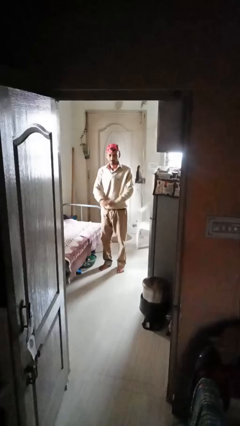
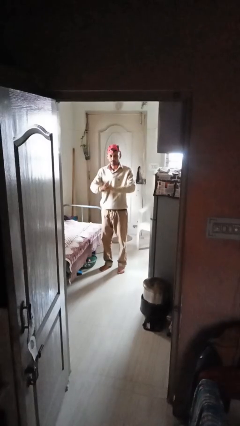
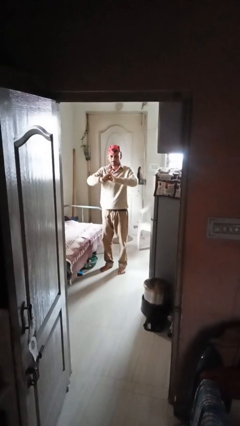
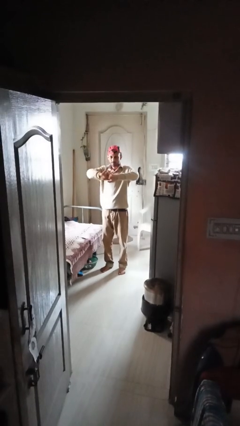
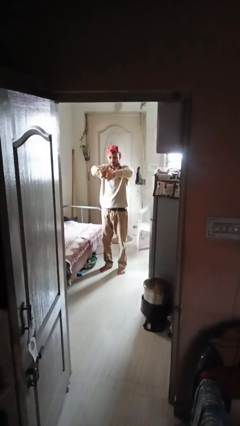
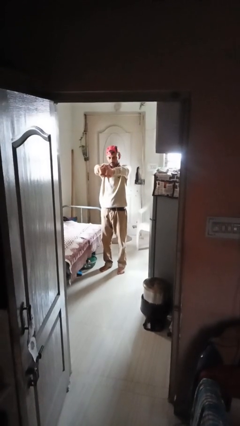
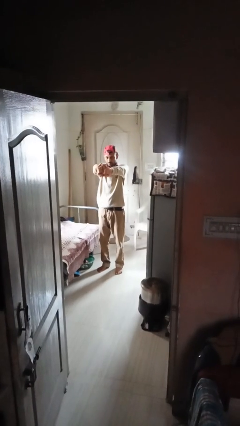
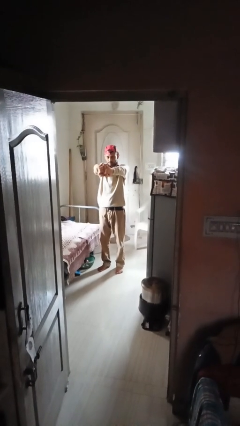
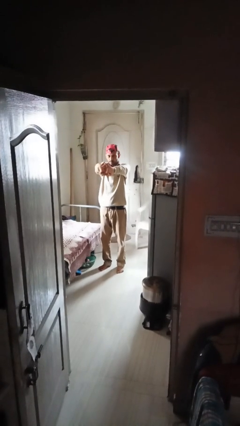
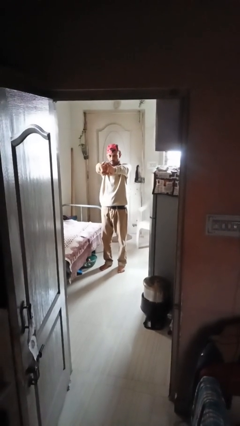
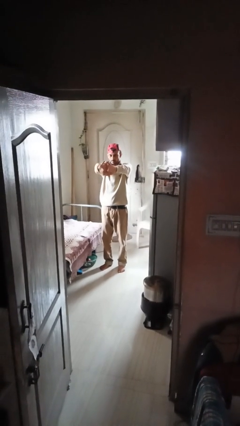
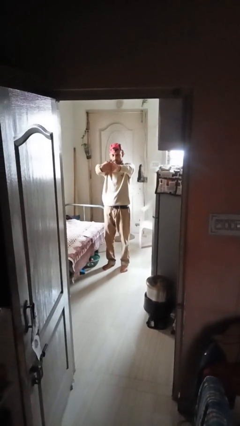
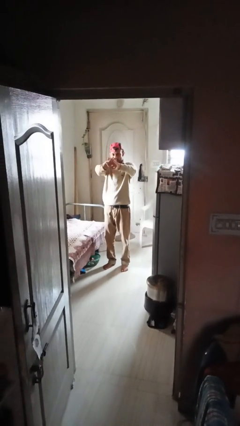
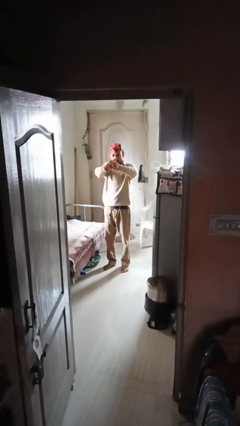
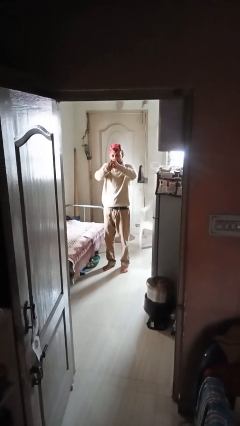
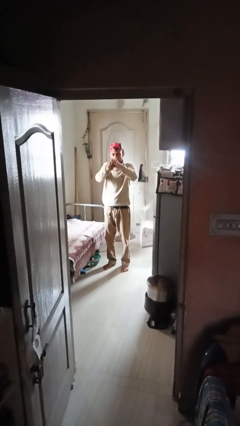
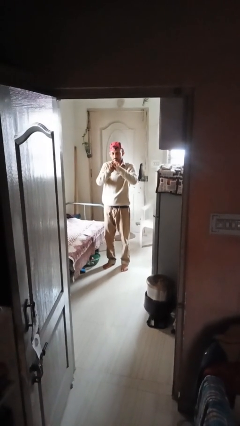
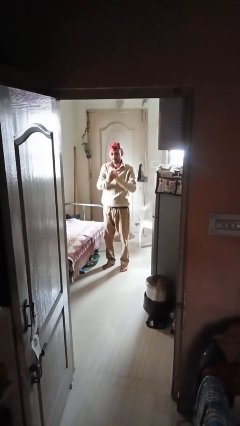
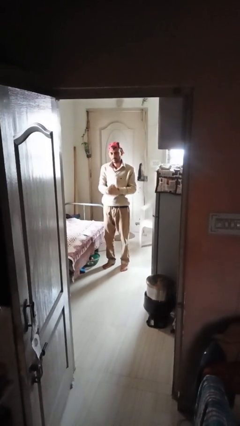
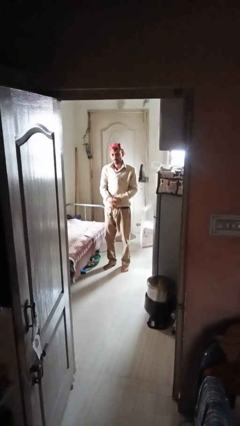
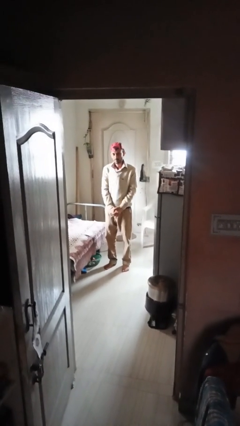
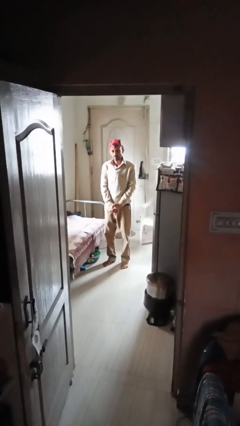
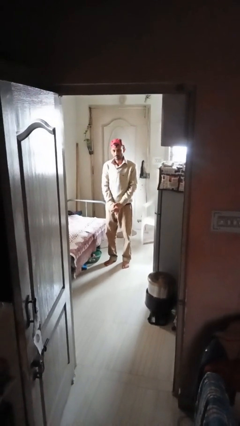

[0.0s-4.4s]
person cracks knuckles

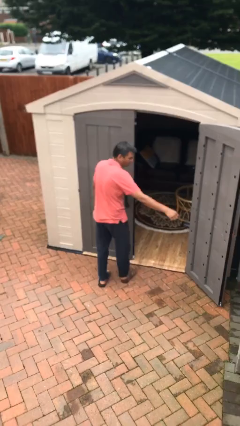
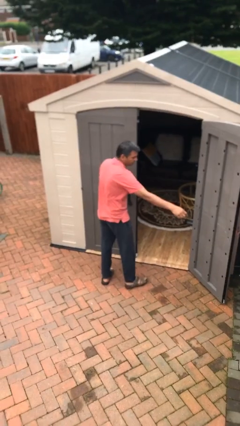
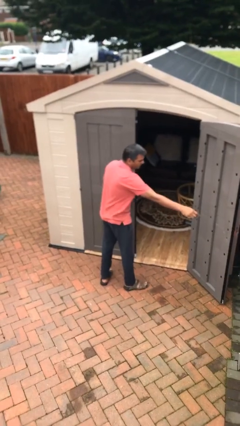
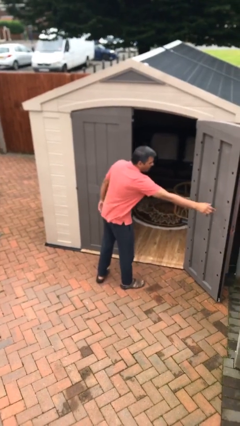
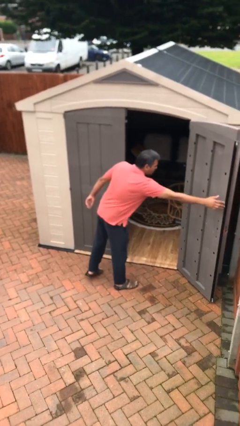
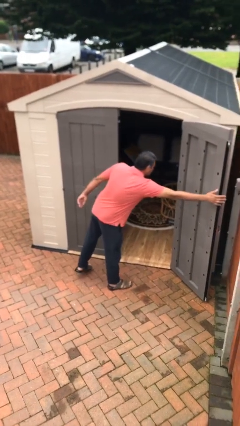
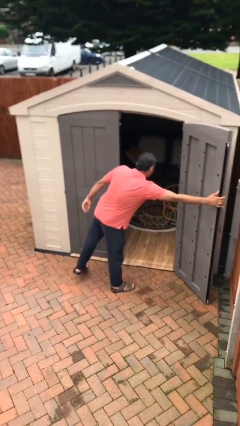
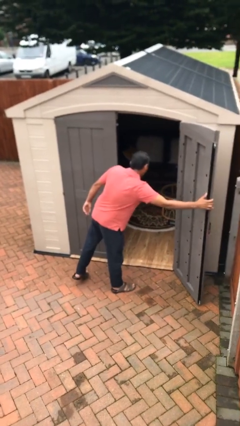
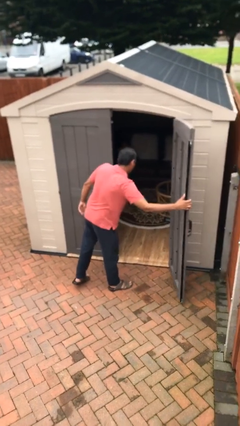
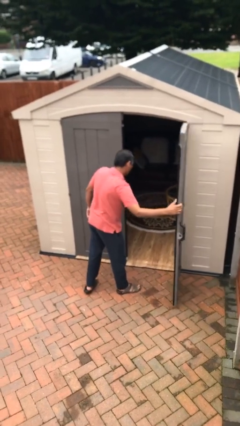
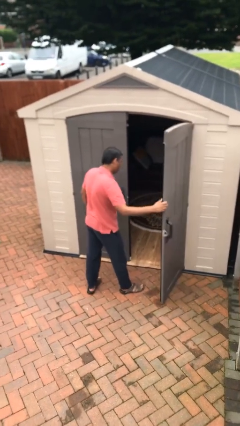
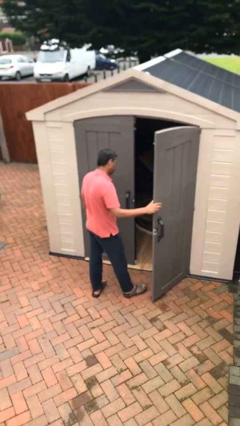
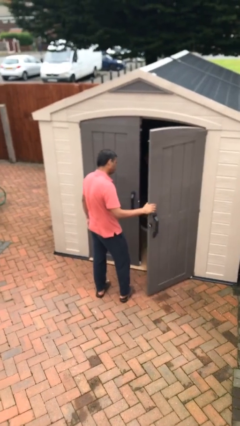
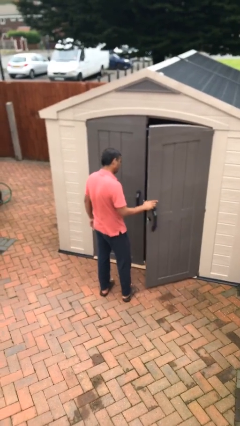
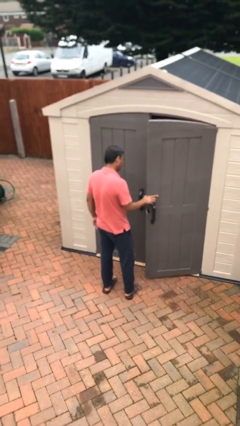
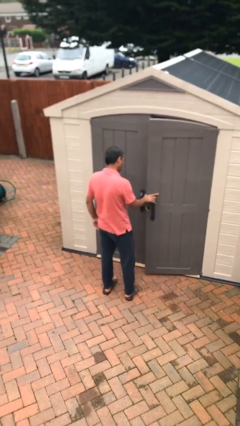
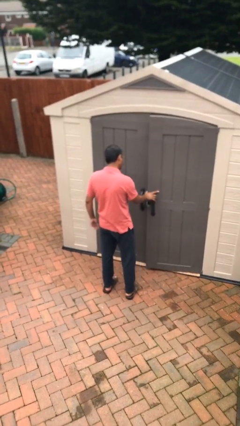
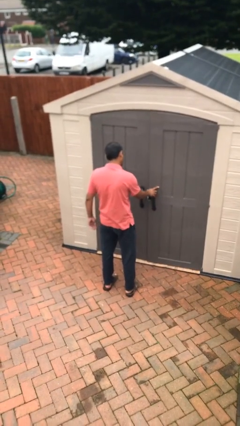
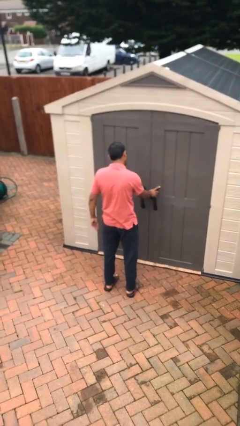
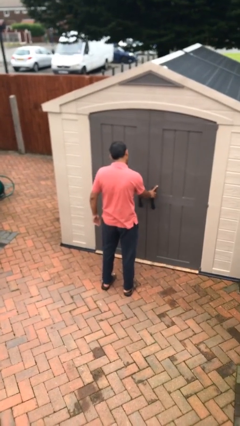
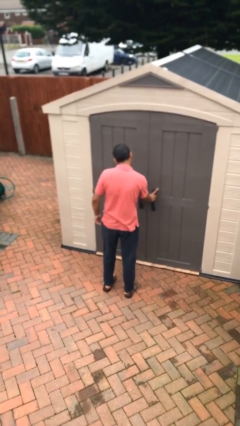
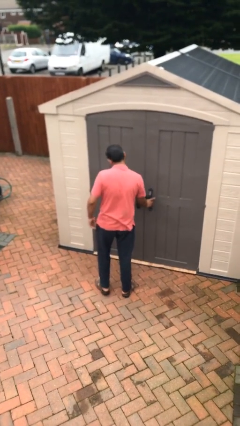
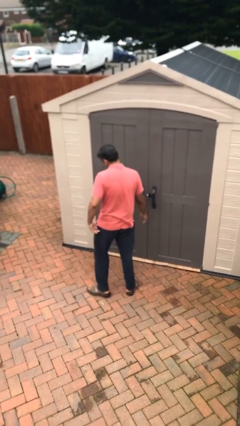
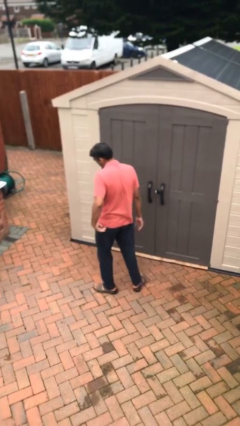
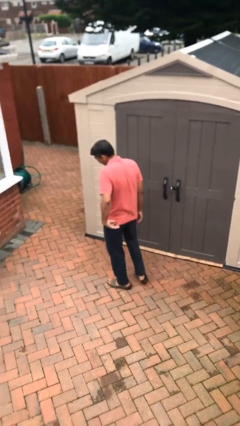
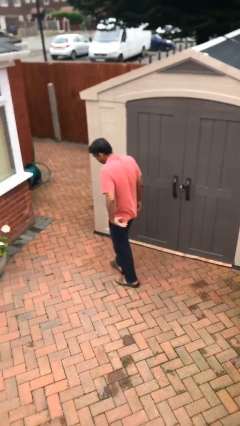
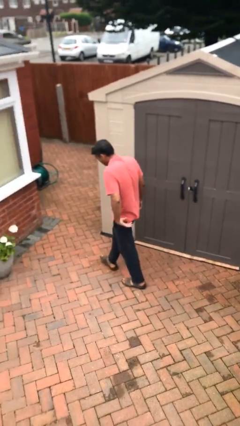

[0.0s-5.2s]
person closes facility door

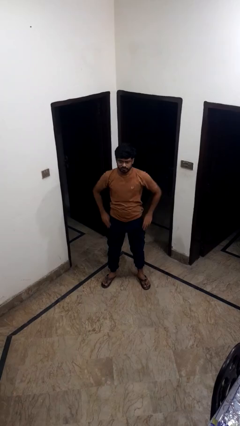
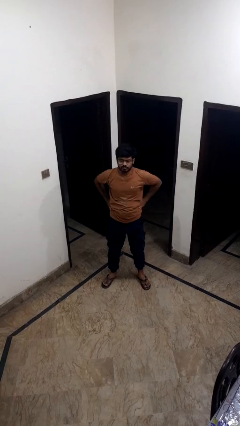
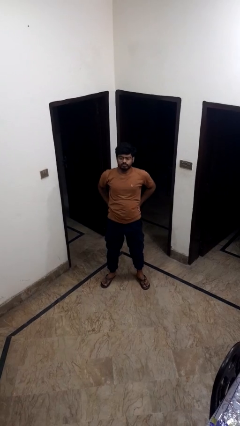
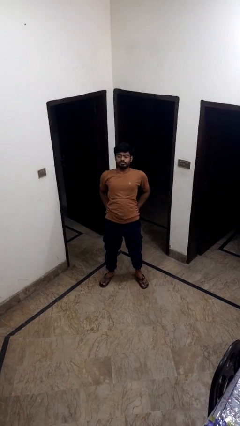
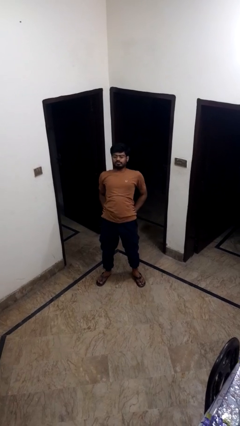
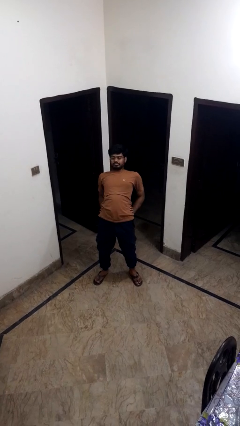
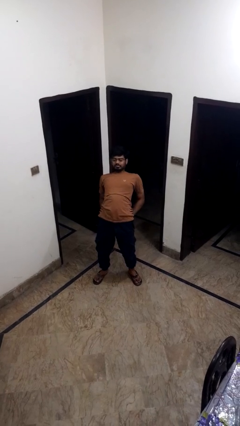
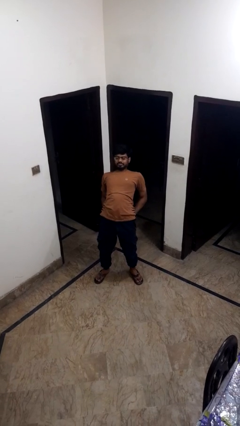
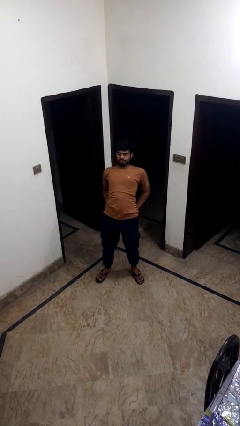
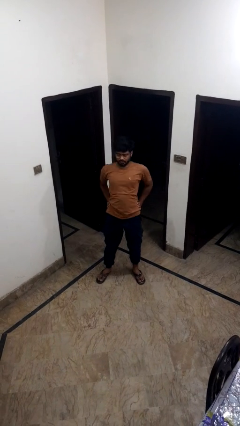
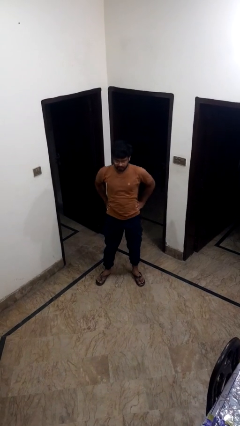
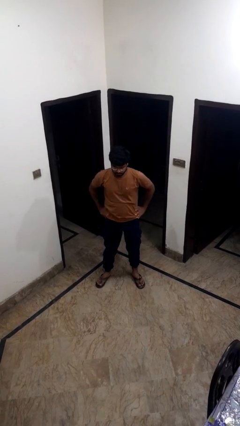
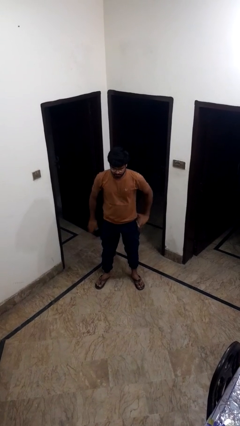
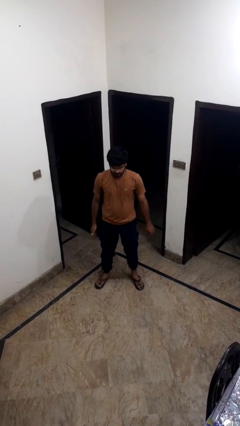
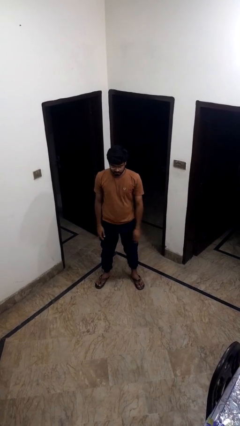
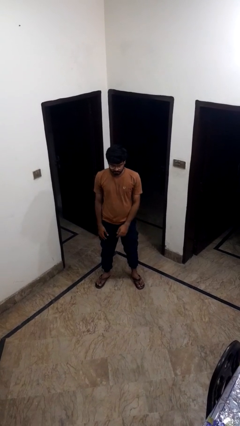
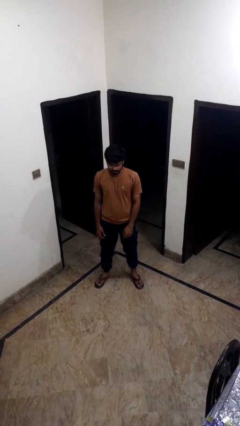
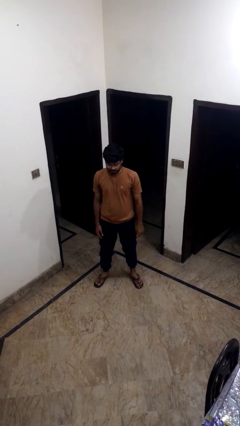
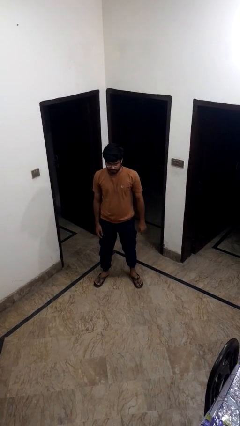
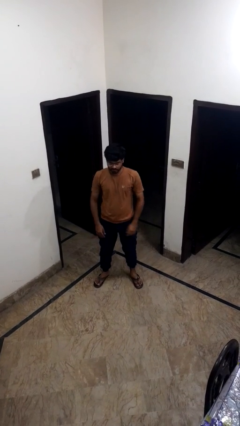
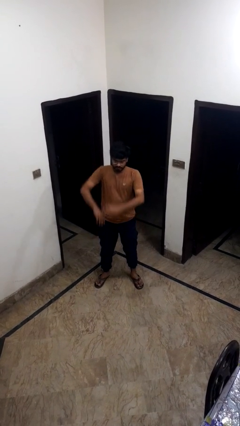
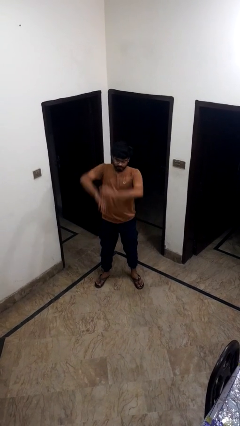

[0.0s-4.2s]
person ties jacket around waist

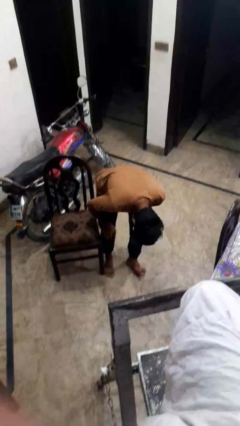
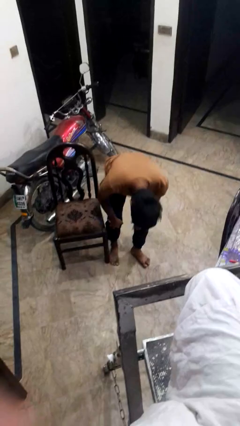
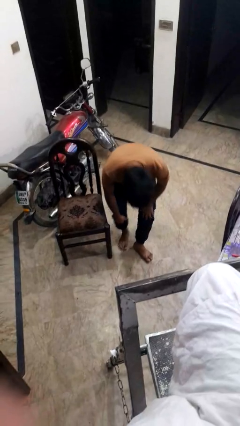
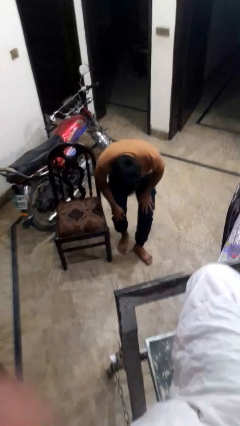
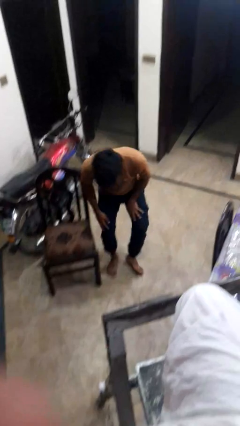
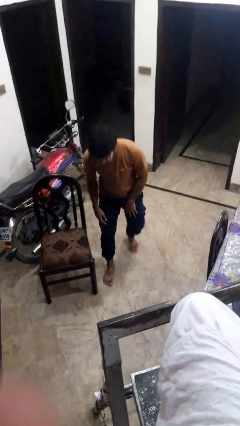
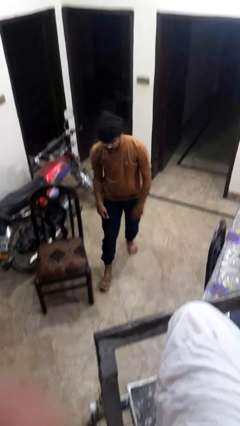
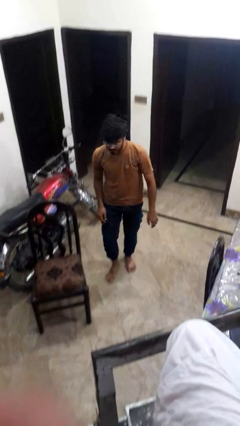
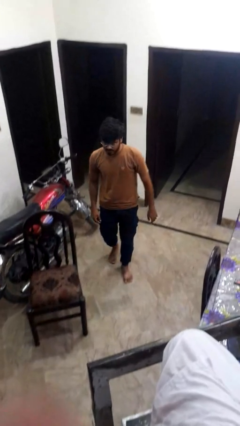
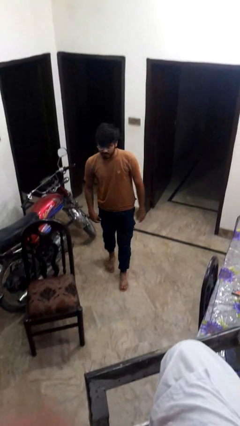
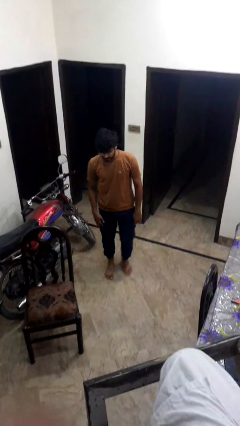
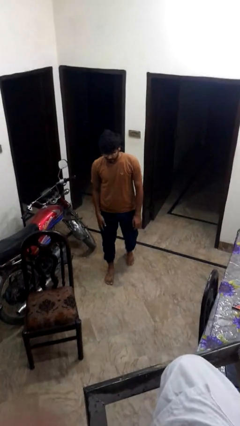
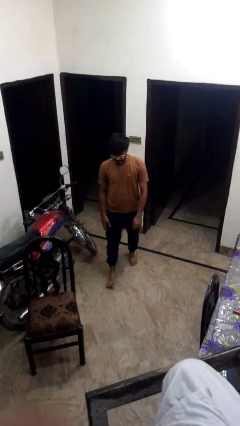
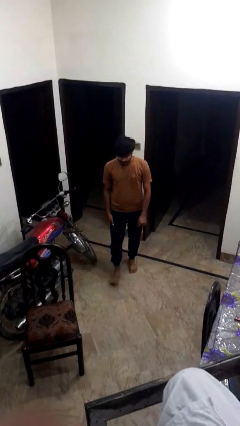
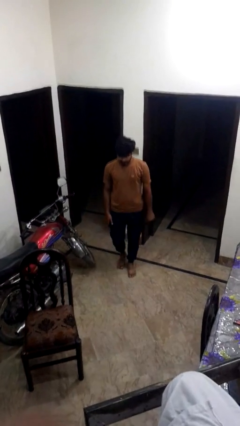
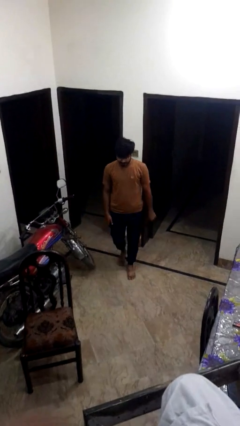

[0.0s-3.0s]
person stubs toe

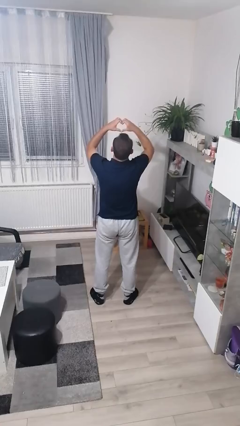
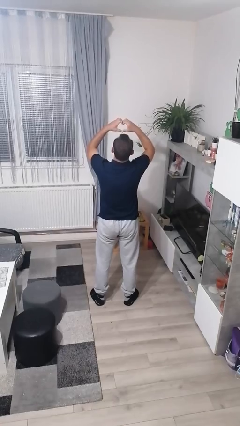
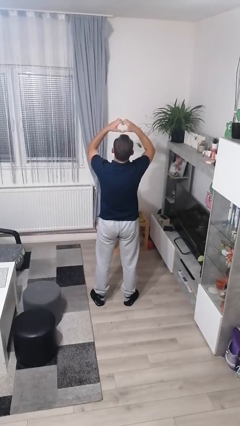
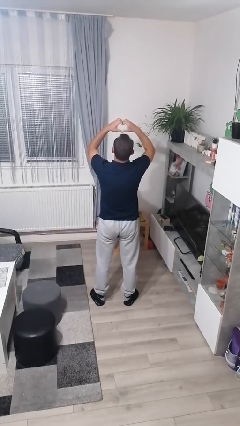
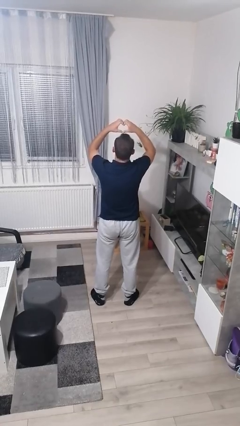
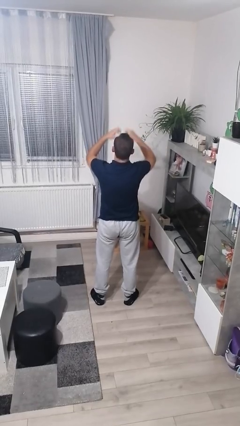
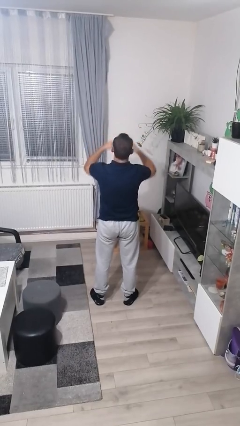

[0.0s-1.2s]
person gestures heart
